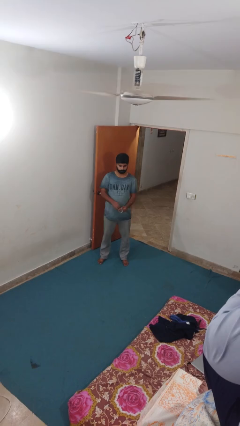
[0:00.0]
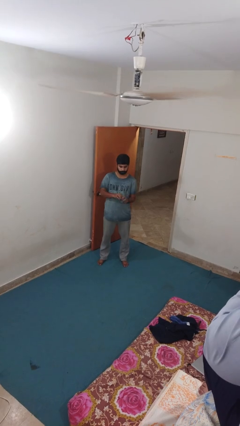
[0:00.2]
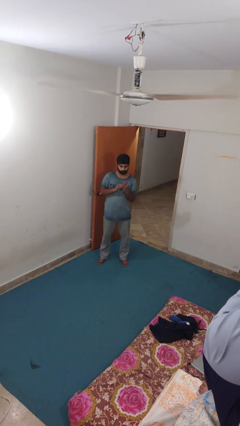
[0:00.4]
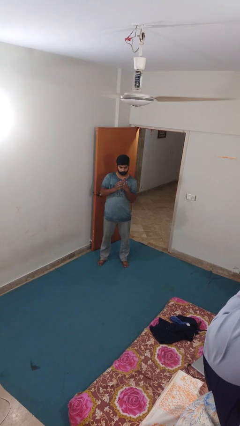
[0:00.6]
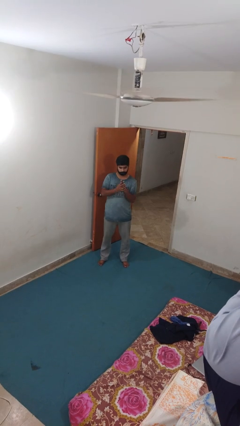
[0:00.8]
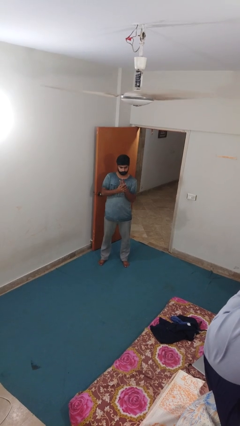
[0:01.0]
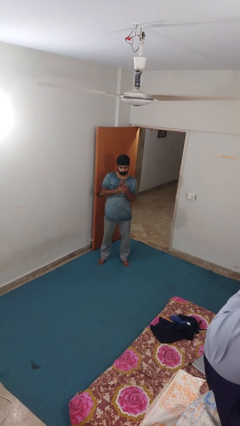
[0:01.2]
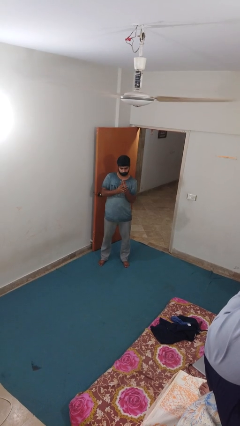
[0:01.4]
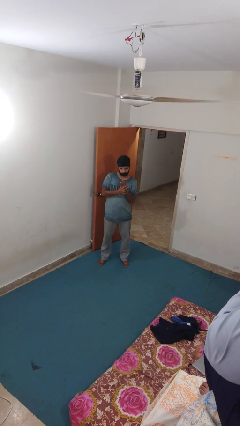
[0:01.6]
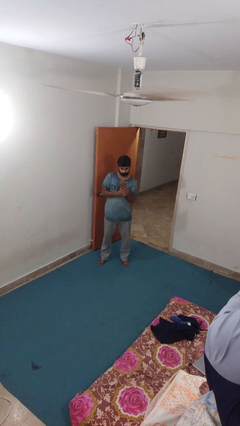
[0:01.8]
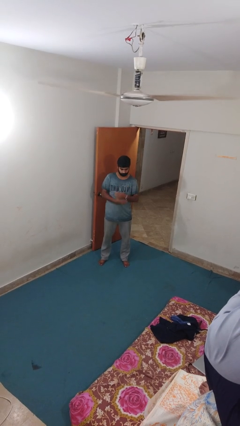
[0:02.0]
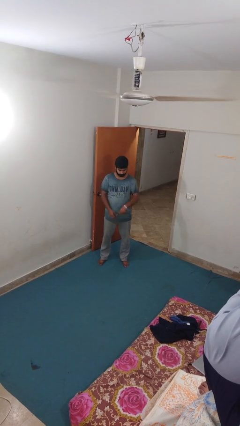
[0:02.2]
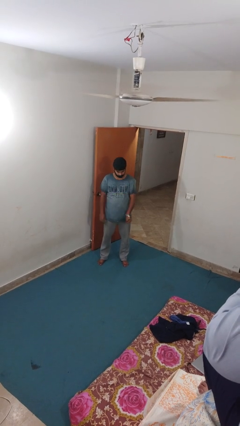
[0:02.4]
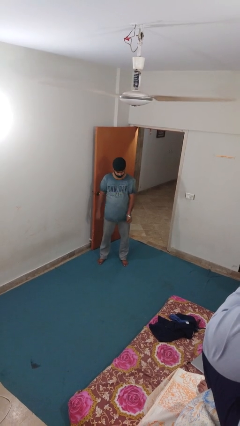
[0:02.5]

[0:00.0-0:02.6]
person puts on wristwatch

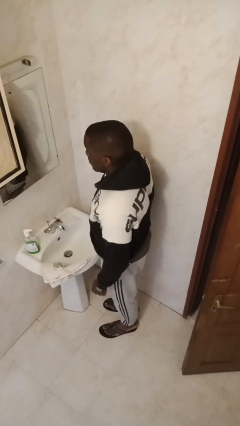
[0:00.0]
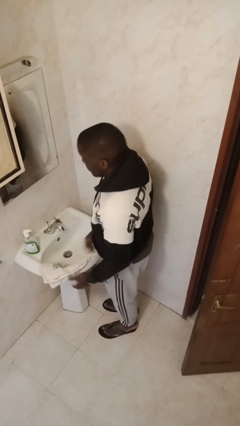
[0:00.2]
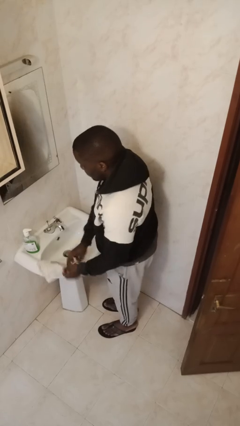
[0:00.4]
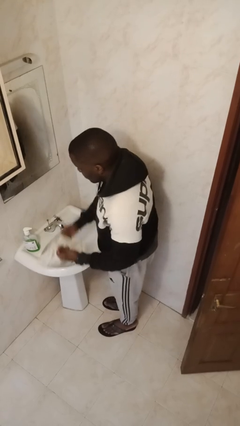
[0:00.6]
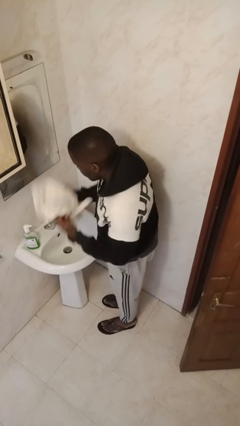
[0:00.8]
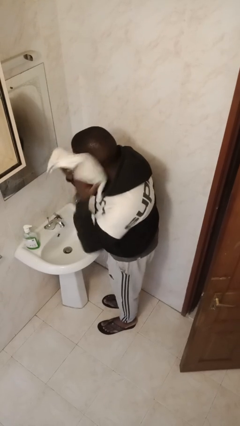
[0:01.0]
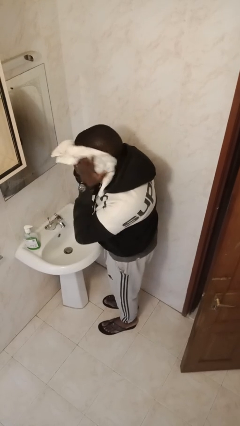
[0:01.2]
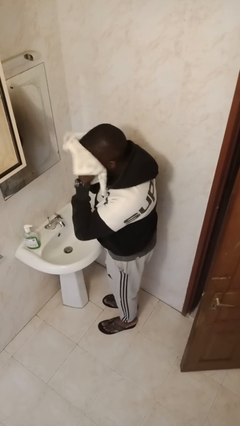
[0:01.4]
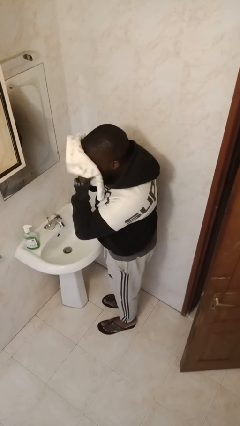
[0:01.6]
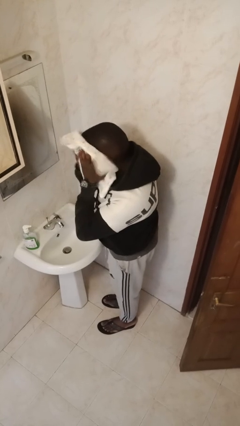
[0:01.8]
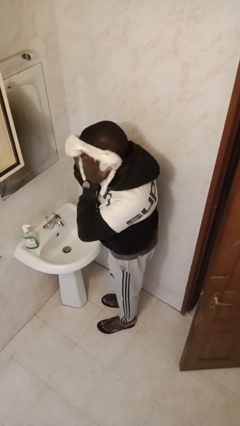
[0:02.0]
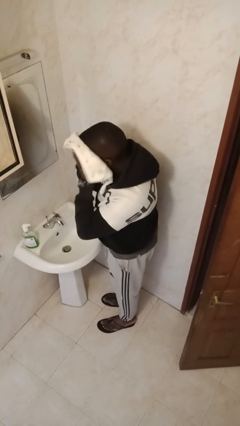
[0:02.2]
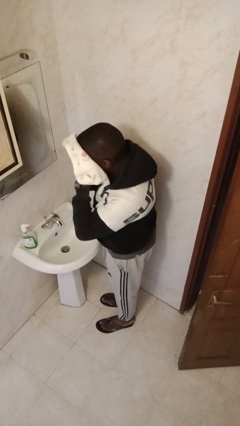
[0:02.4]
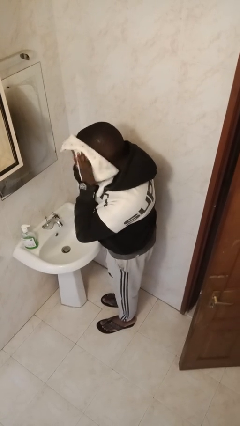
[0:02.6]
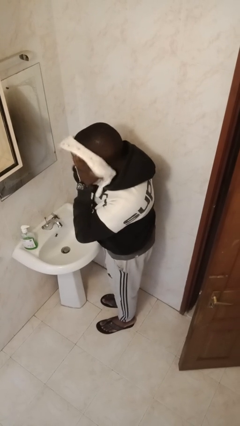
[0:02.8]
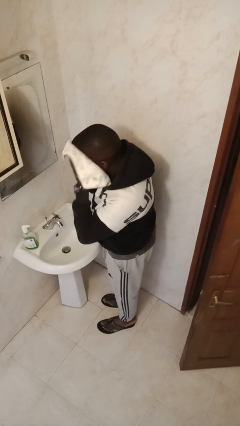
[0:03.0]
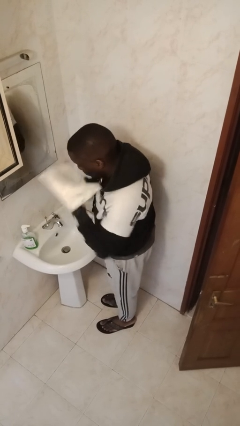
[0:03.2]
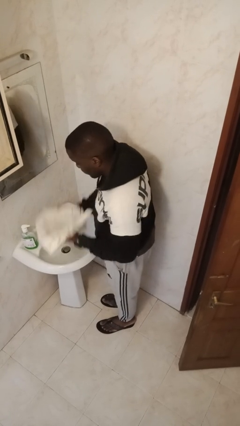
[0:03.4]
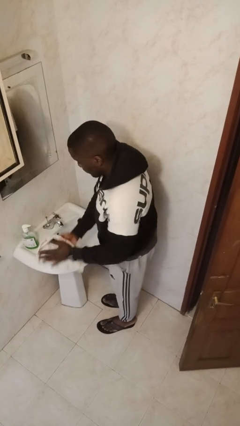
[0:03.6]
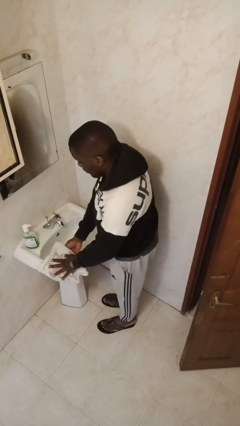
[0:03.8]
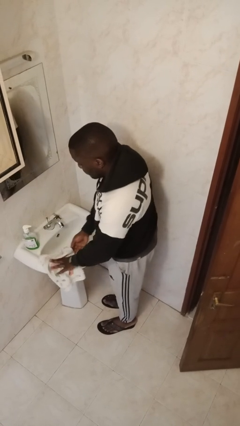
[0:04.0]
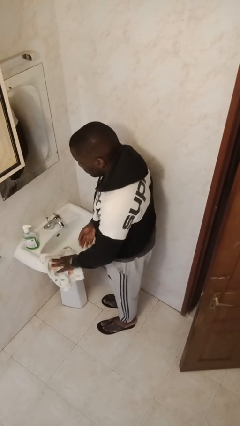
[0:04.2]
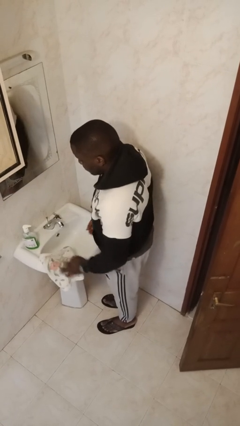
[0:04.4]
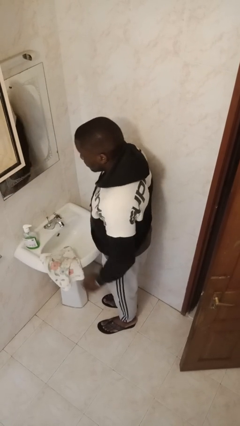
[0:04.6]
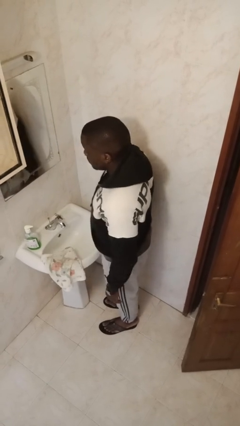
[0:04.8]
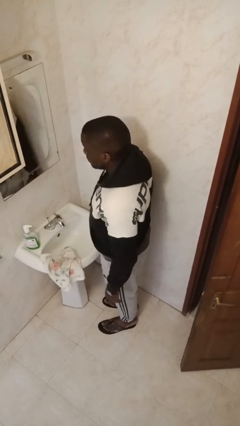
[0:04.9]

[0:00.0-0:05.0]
person dries face with towel

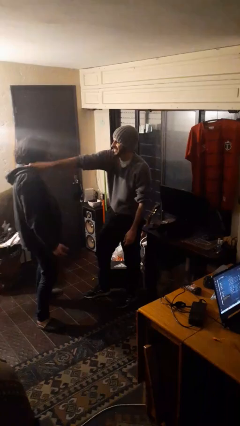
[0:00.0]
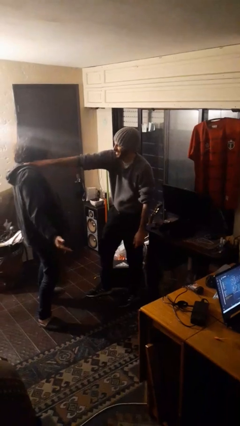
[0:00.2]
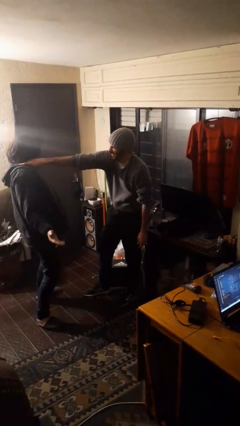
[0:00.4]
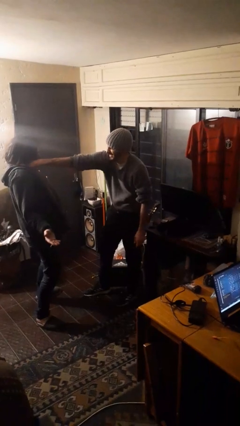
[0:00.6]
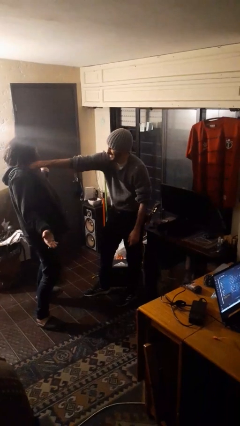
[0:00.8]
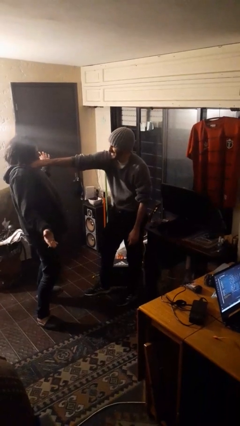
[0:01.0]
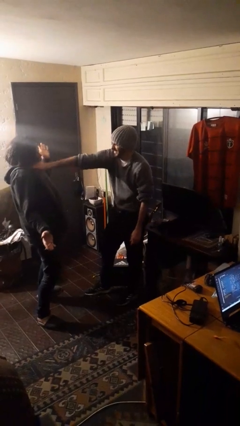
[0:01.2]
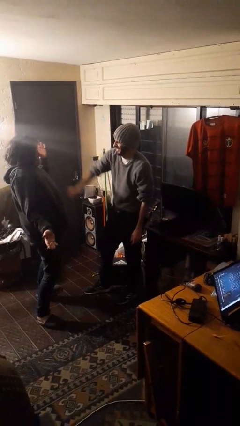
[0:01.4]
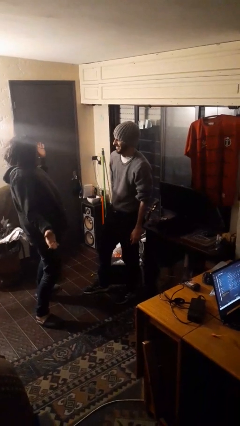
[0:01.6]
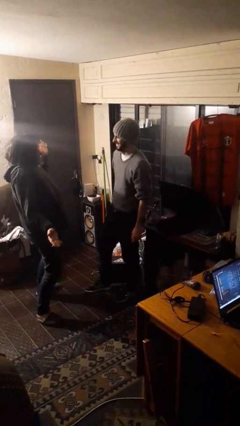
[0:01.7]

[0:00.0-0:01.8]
person tickles person

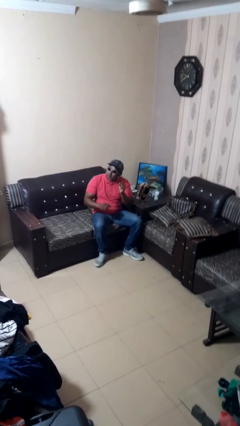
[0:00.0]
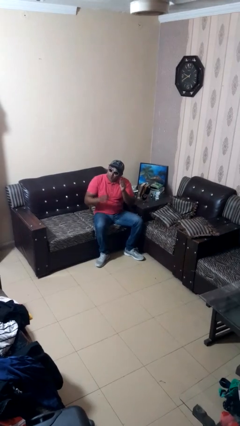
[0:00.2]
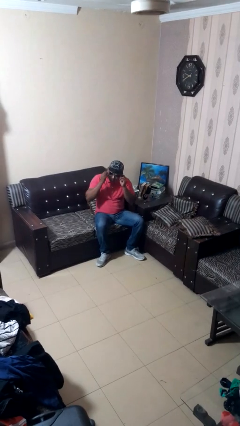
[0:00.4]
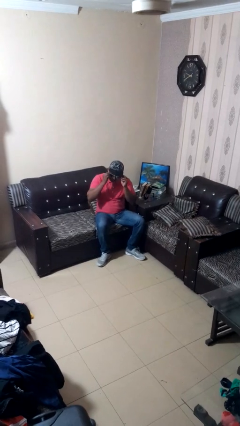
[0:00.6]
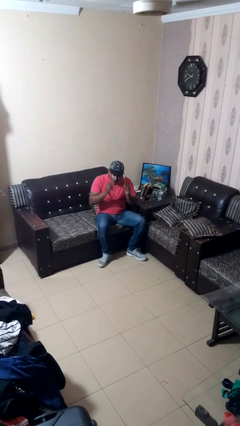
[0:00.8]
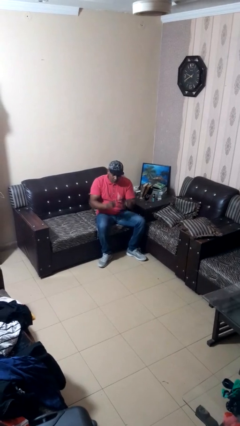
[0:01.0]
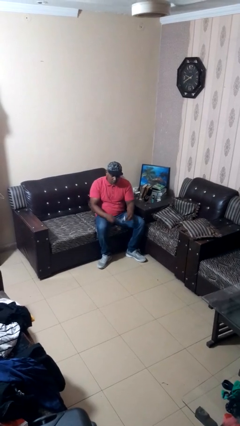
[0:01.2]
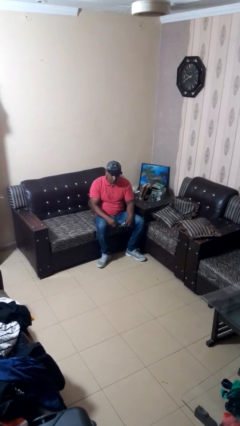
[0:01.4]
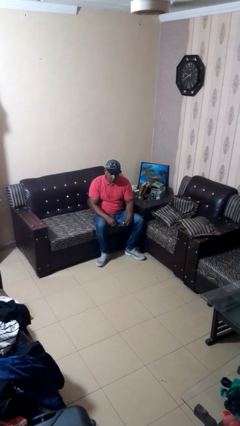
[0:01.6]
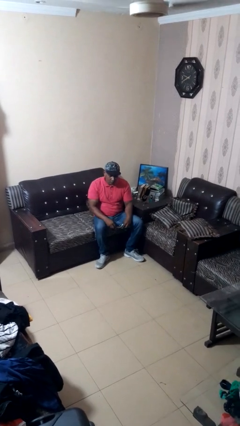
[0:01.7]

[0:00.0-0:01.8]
person takes off sunglasses

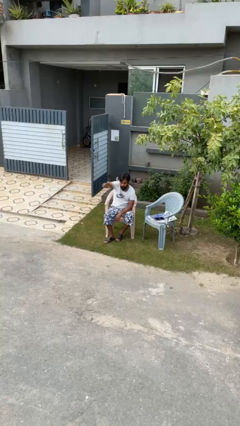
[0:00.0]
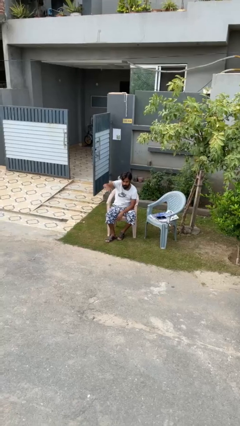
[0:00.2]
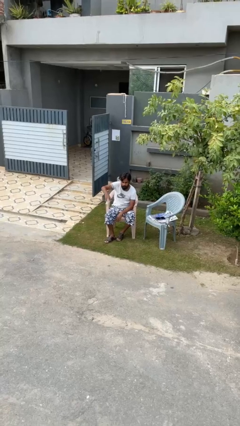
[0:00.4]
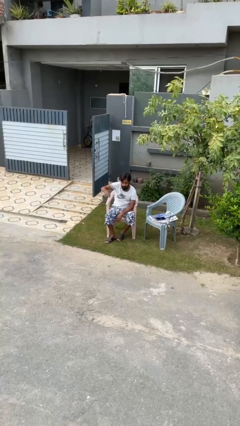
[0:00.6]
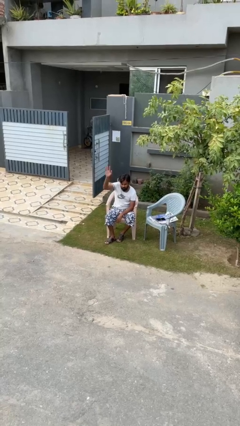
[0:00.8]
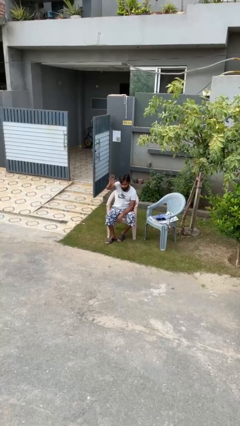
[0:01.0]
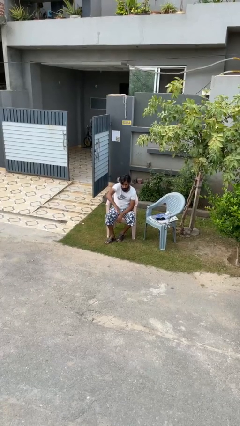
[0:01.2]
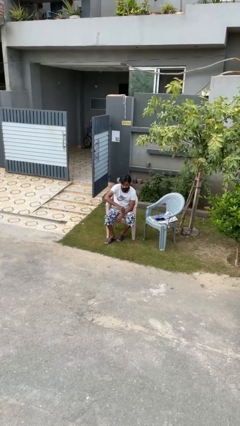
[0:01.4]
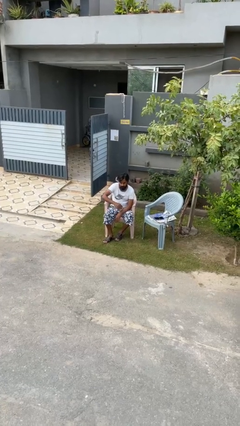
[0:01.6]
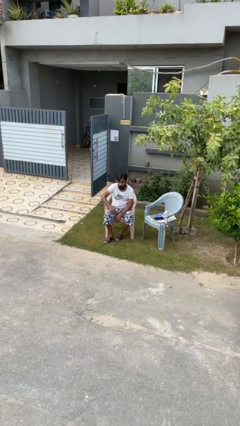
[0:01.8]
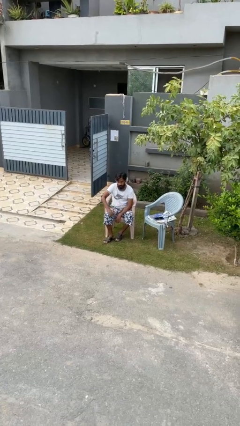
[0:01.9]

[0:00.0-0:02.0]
person gestures swipe down

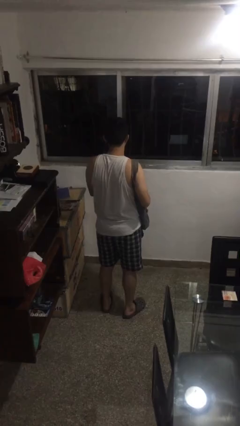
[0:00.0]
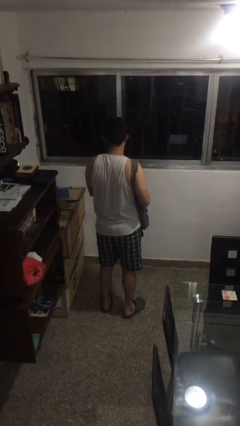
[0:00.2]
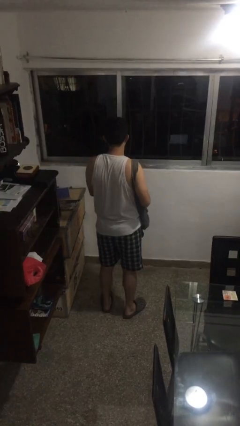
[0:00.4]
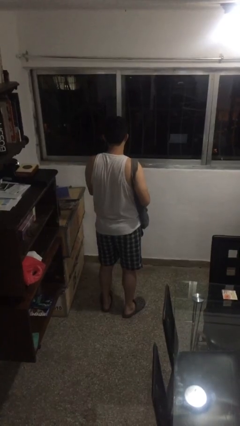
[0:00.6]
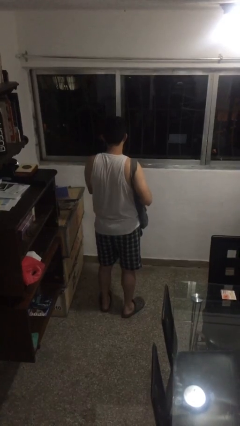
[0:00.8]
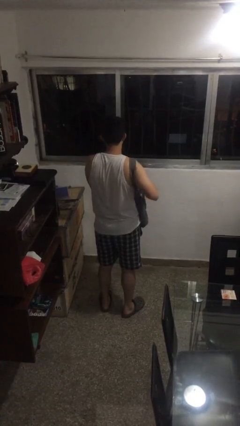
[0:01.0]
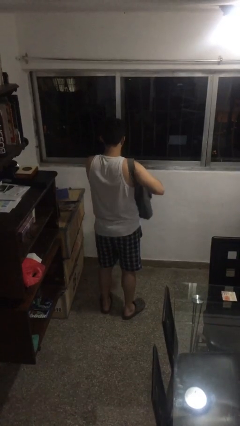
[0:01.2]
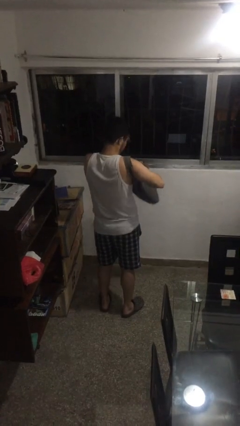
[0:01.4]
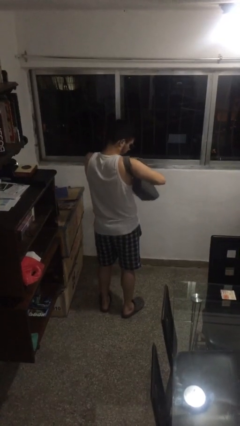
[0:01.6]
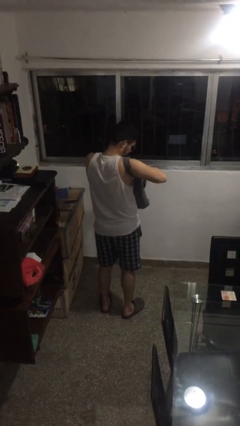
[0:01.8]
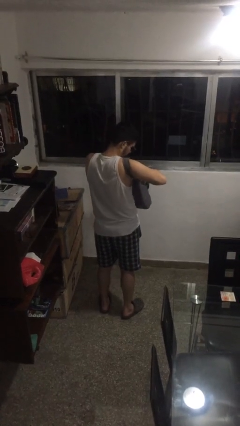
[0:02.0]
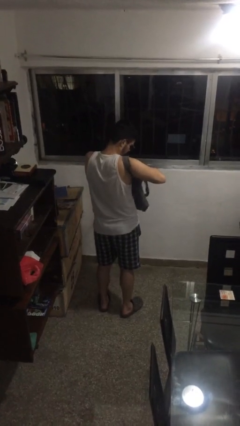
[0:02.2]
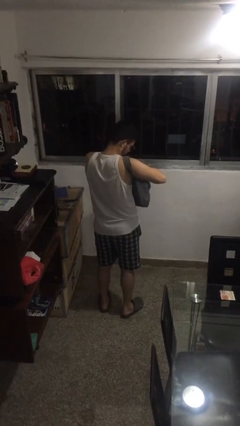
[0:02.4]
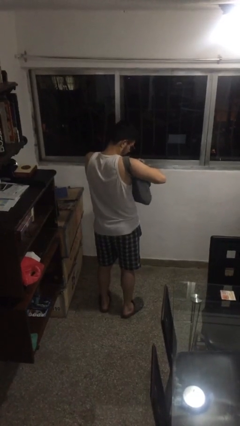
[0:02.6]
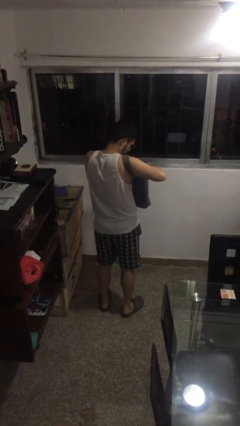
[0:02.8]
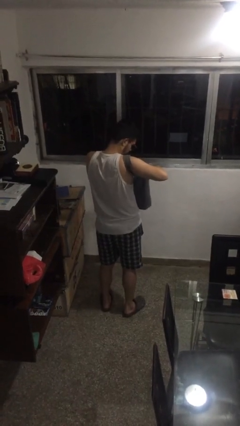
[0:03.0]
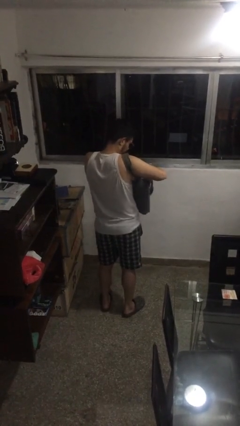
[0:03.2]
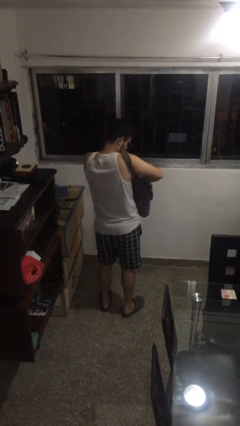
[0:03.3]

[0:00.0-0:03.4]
person searches in purse

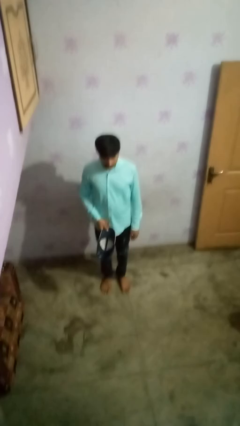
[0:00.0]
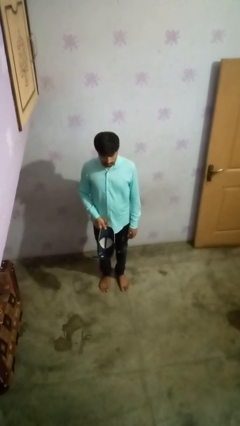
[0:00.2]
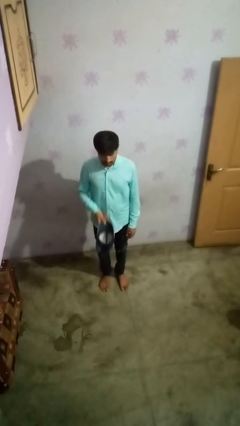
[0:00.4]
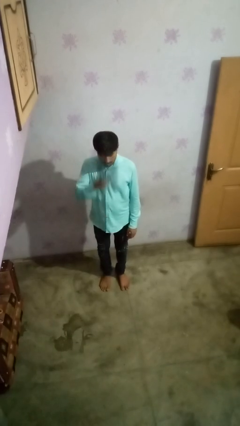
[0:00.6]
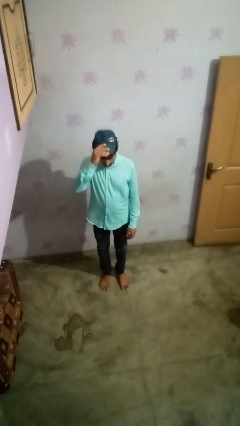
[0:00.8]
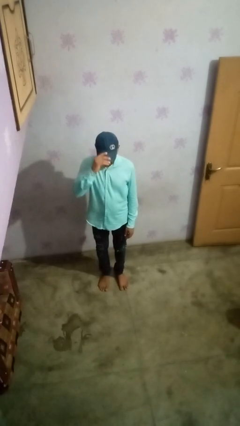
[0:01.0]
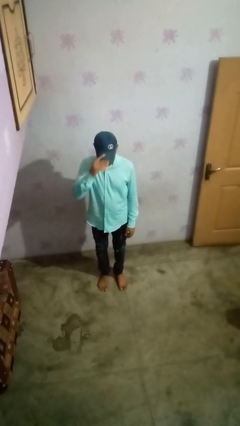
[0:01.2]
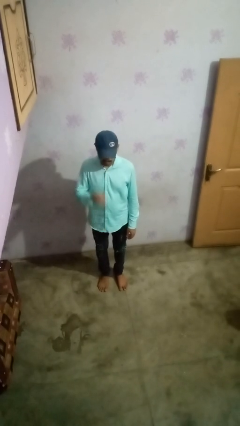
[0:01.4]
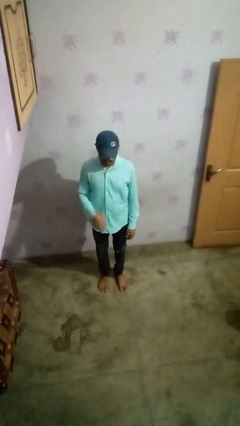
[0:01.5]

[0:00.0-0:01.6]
person puts on hat
